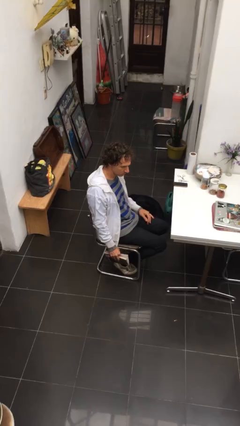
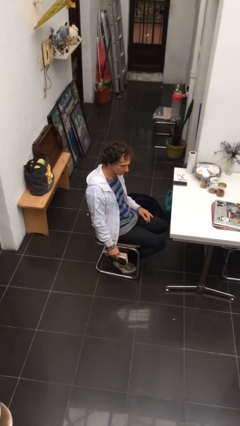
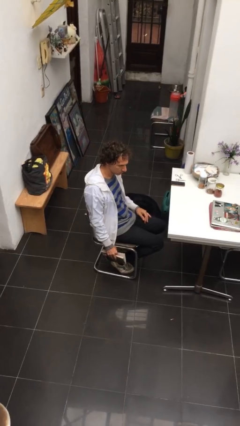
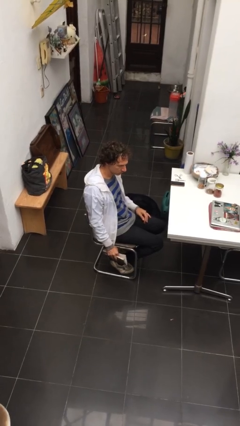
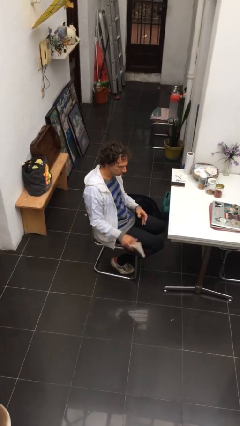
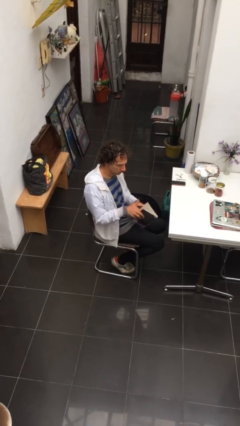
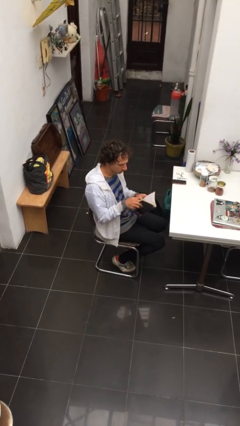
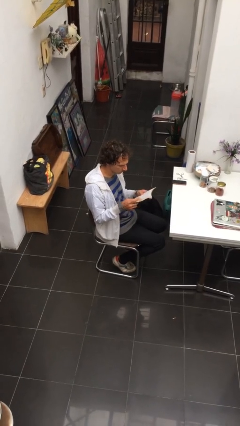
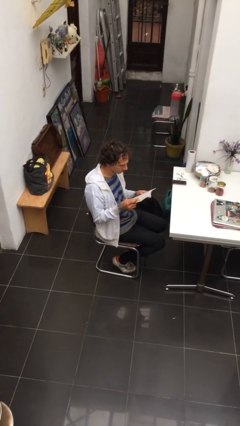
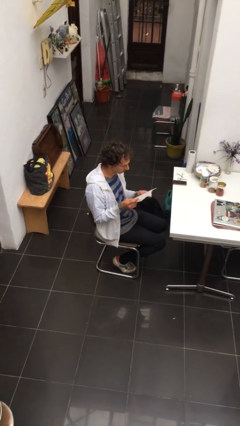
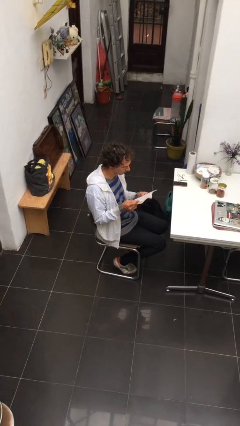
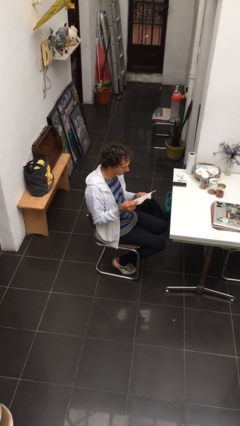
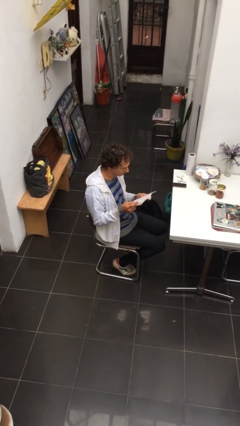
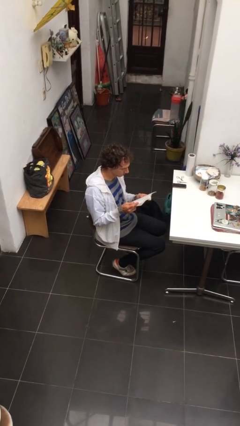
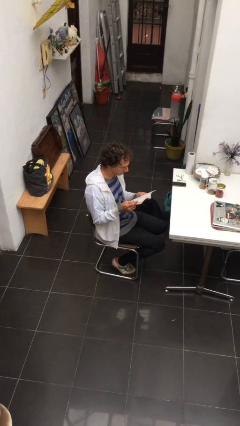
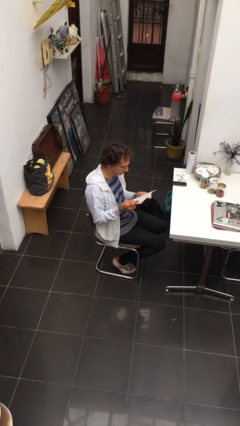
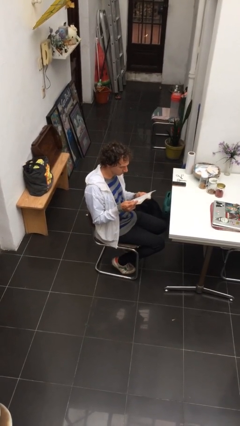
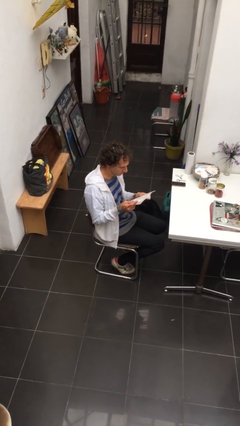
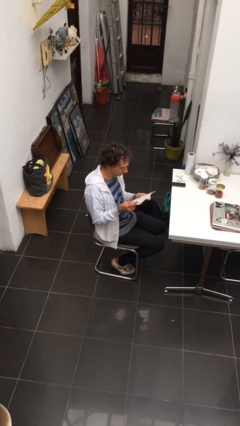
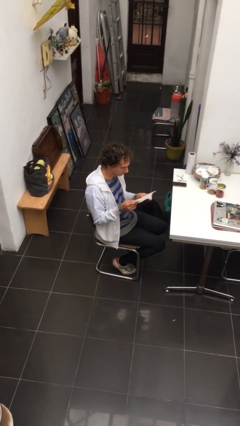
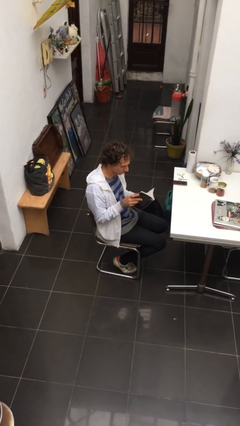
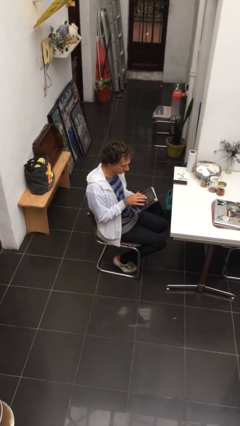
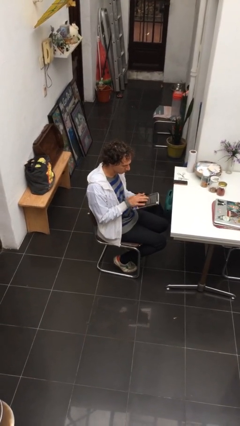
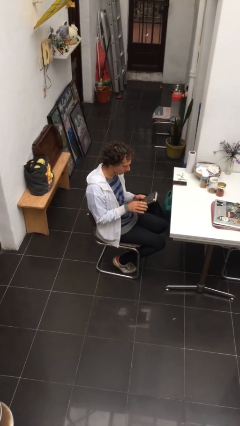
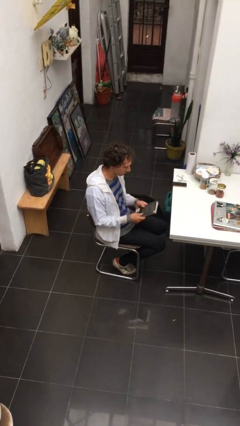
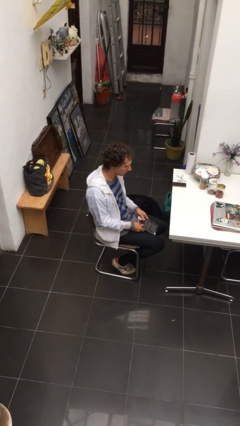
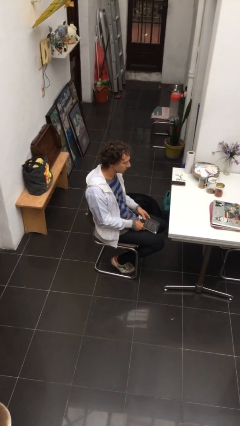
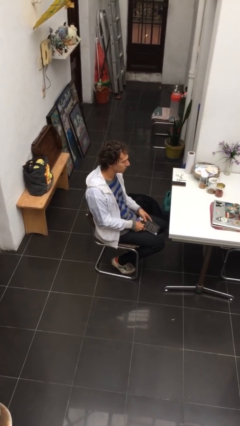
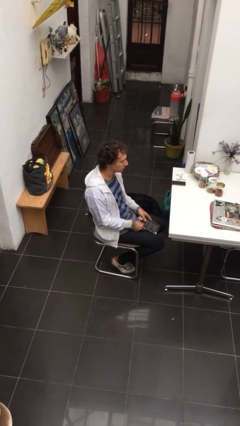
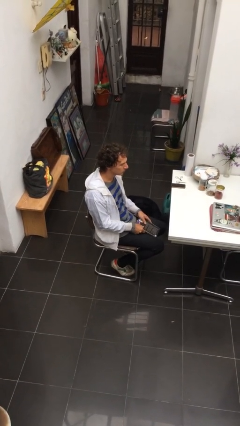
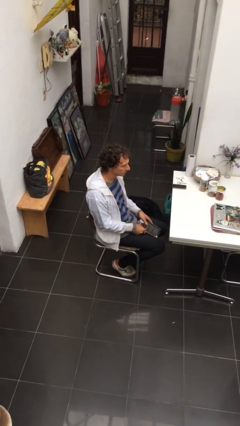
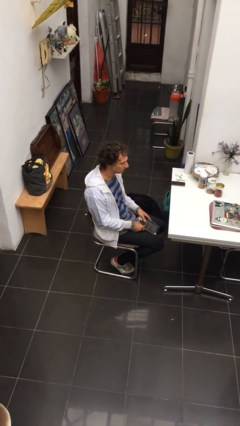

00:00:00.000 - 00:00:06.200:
person reads document

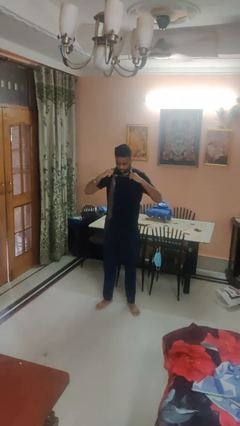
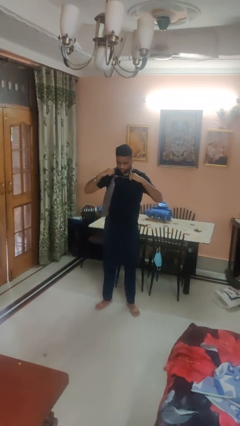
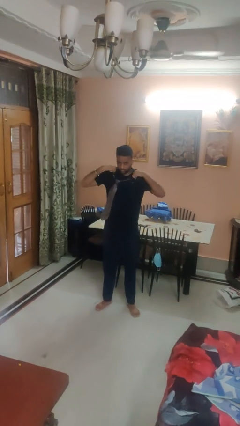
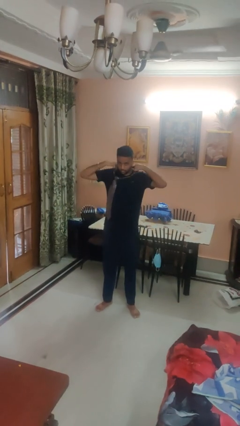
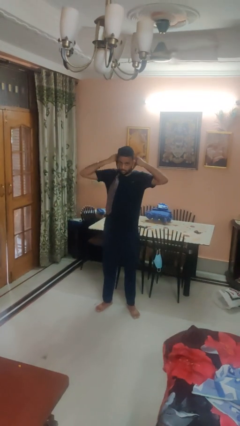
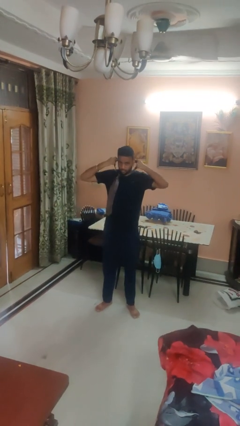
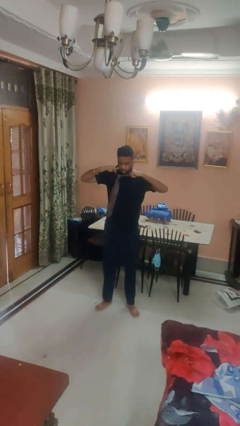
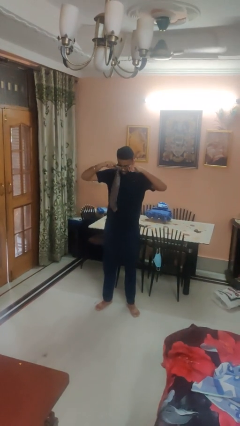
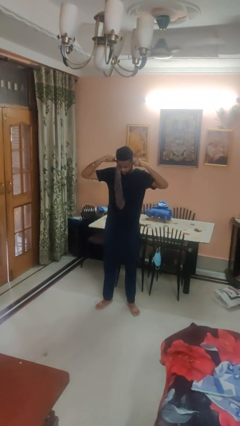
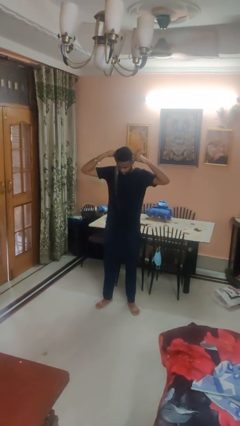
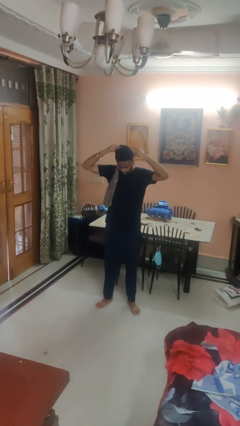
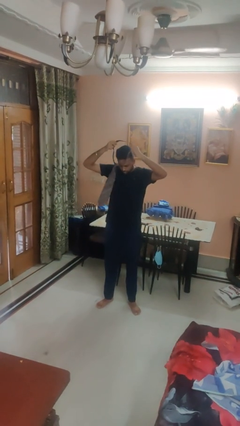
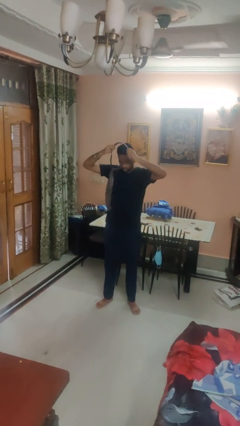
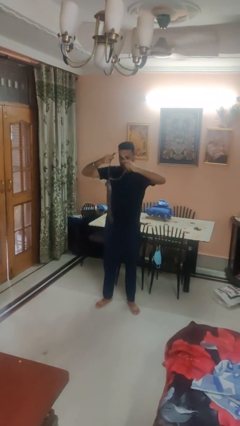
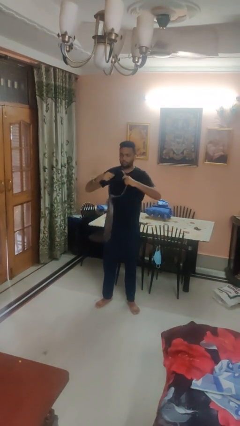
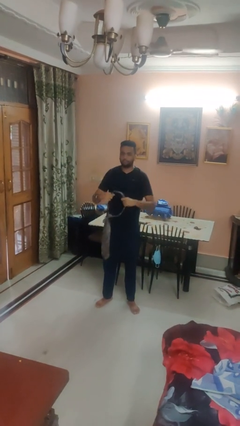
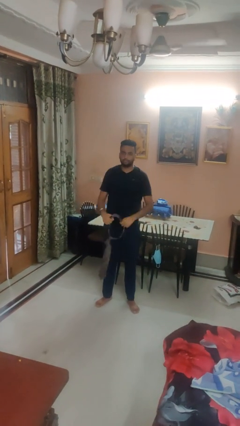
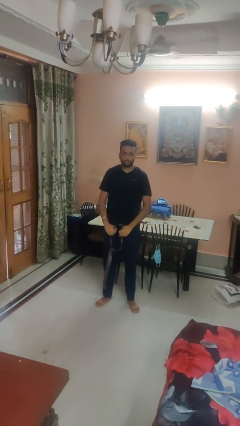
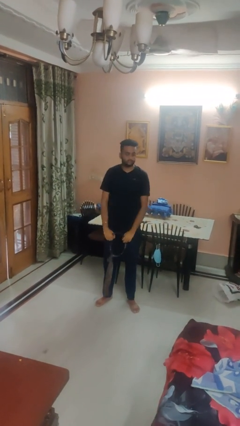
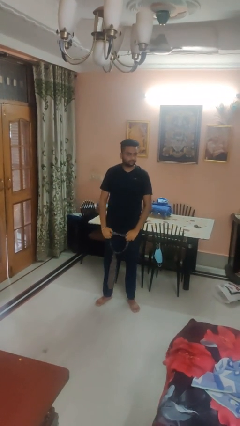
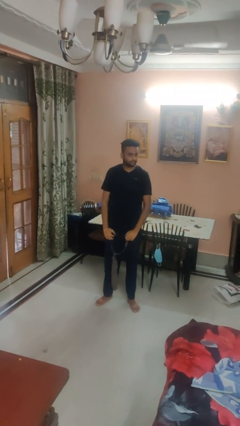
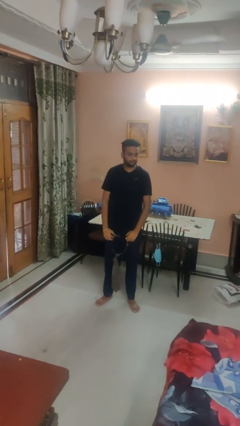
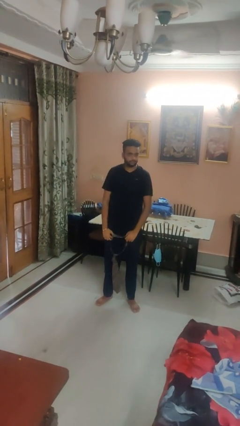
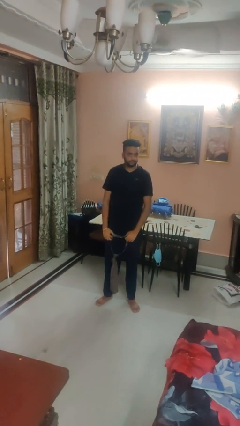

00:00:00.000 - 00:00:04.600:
person takes off necktie

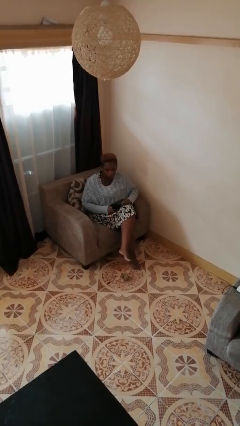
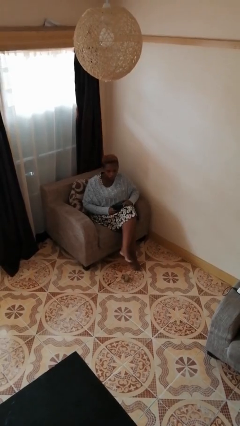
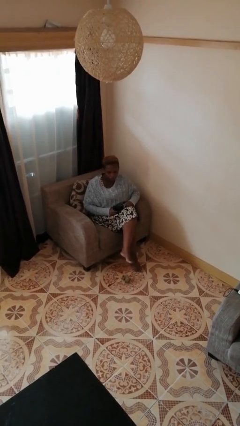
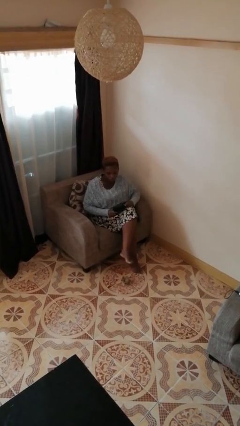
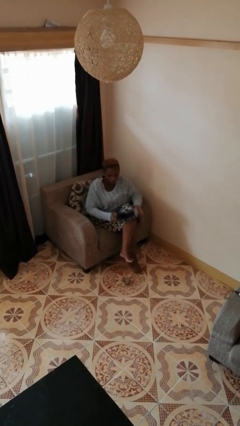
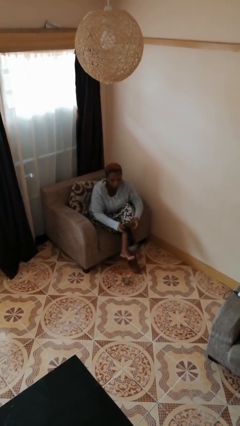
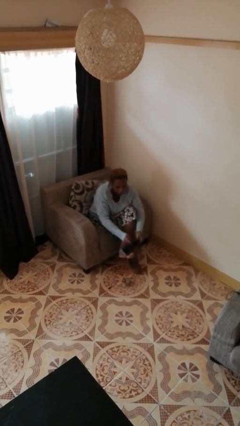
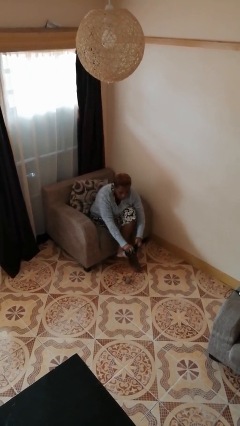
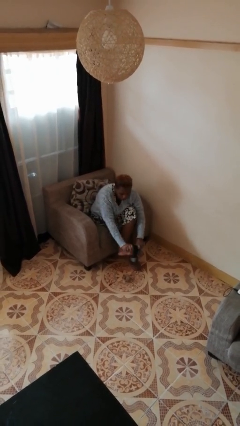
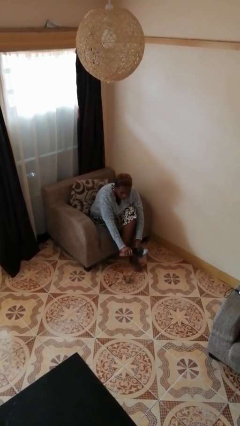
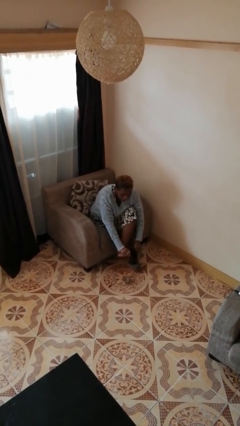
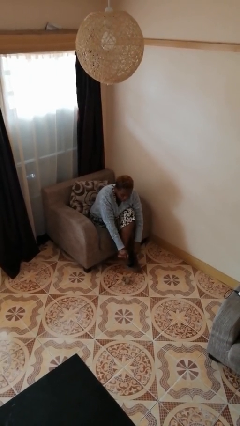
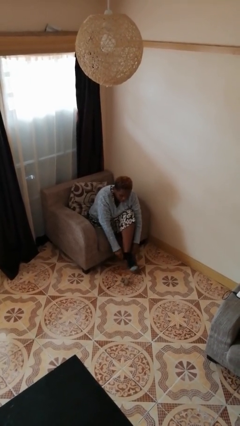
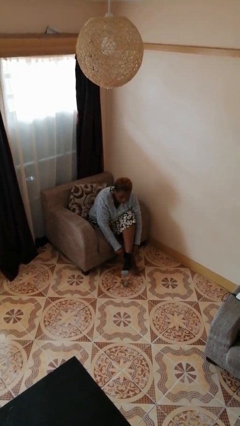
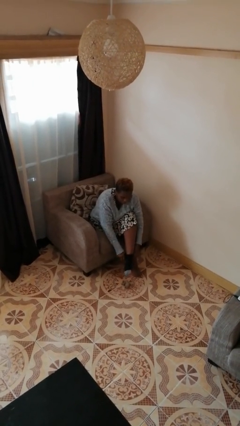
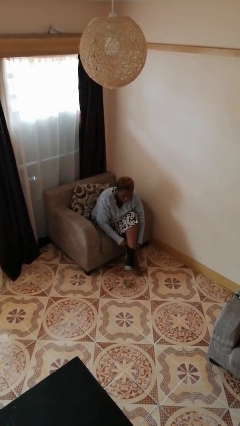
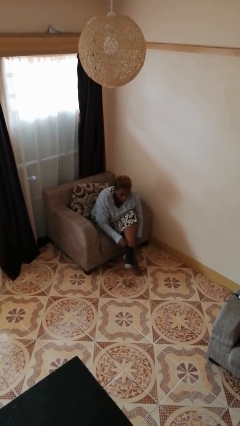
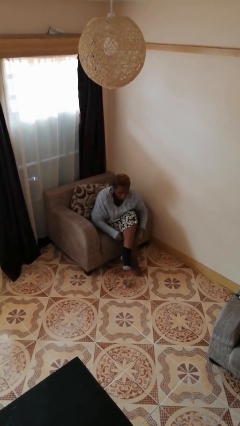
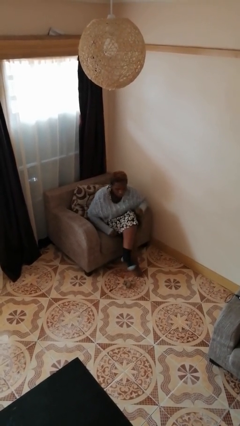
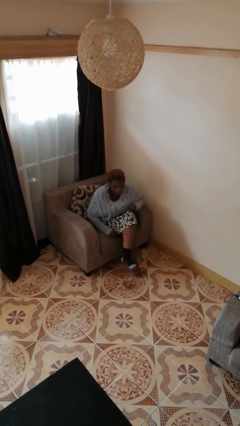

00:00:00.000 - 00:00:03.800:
person puts on socks

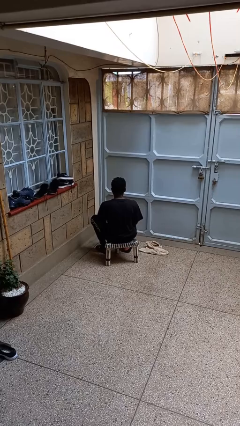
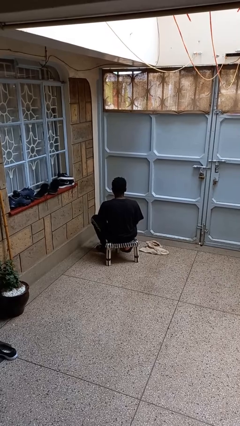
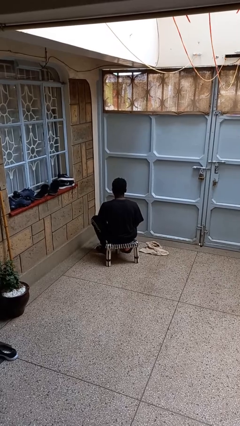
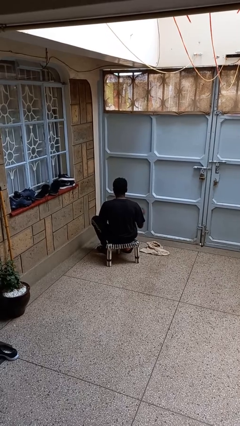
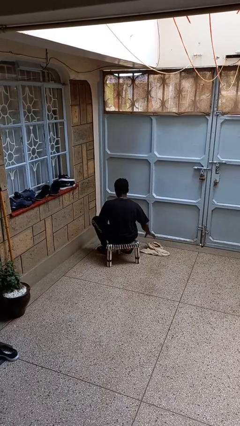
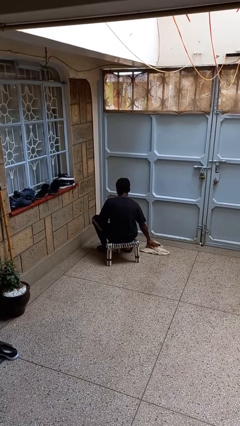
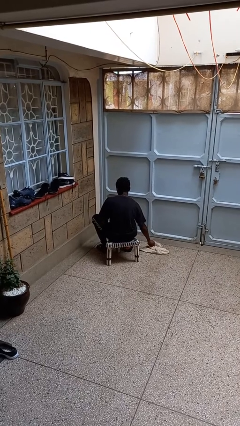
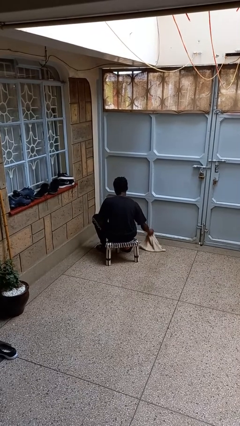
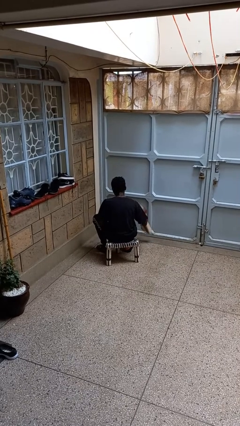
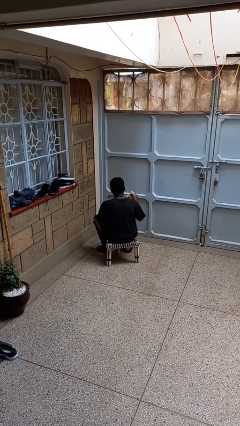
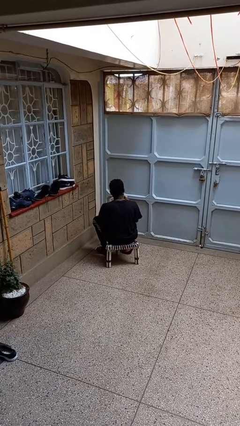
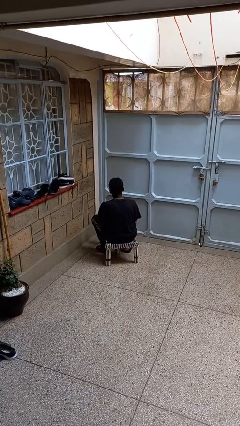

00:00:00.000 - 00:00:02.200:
person picks up object from floor

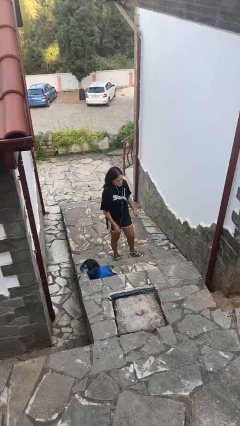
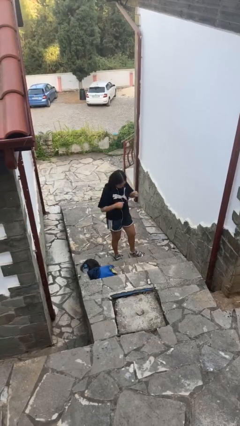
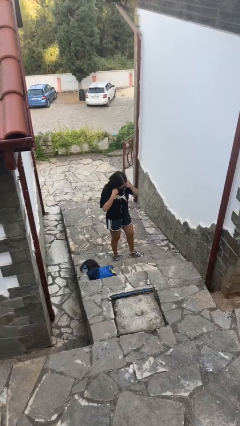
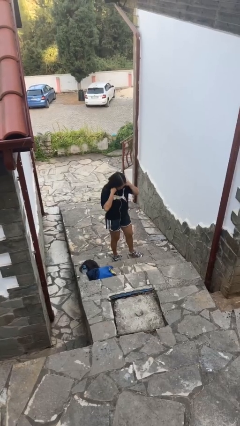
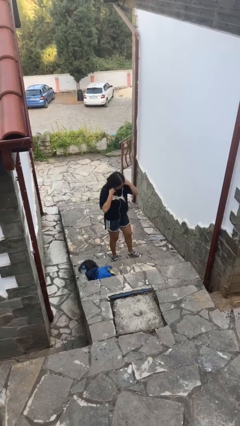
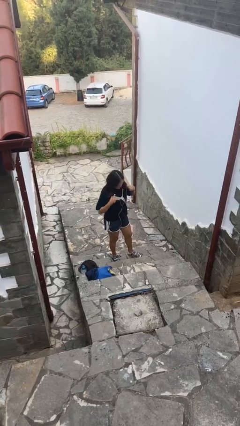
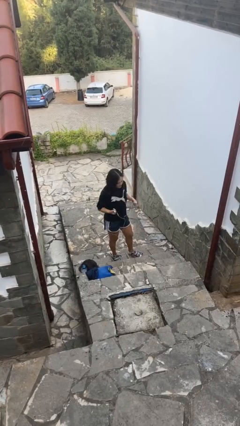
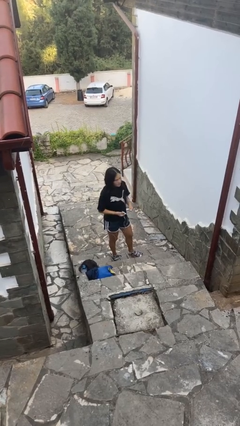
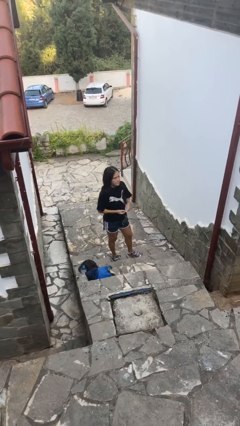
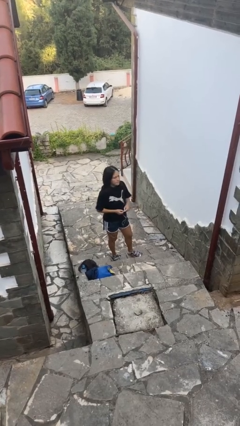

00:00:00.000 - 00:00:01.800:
person takes off headphones
